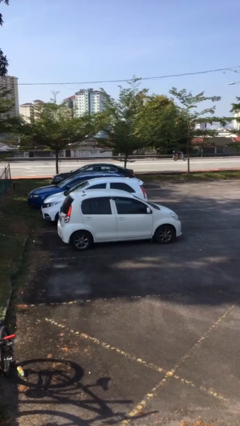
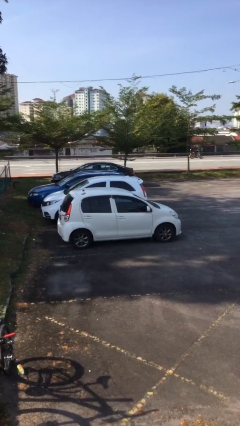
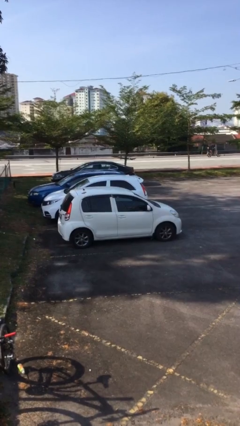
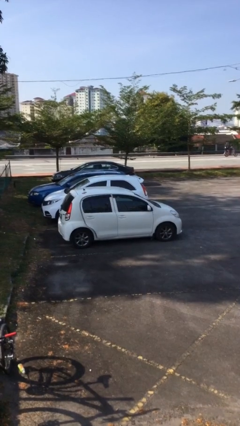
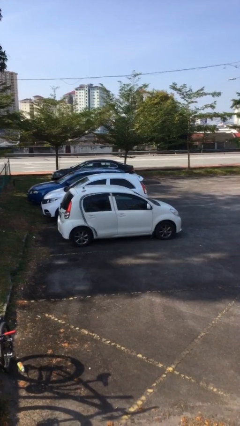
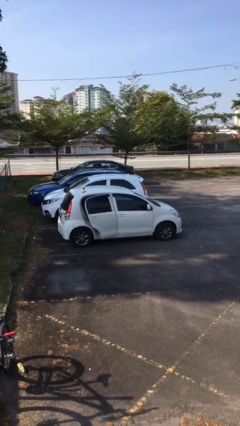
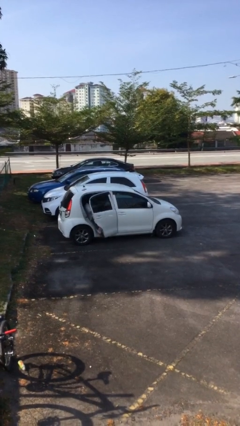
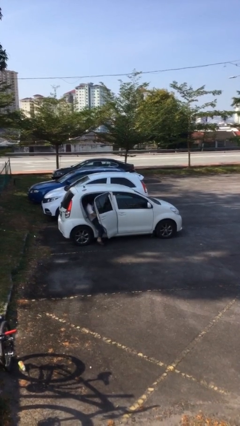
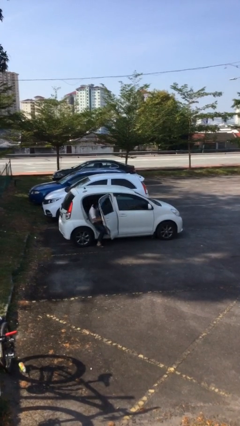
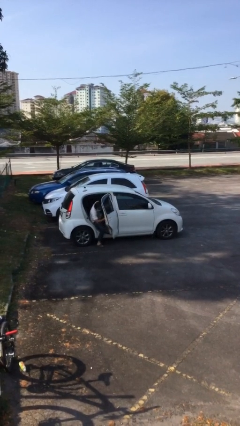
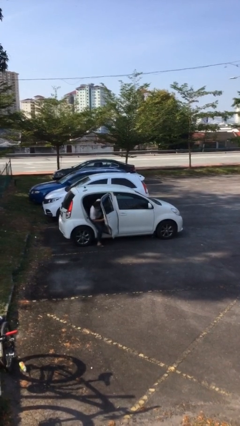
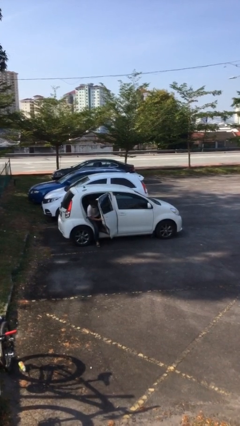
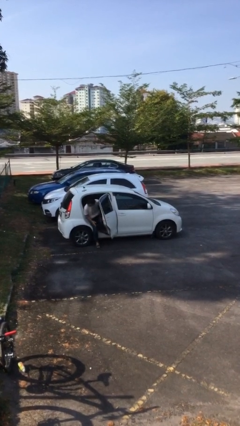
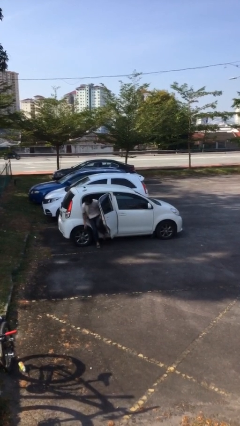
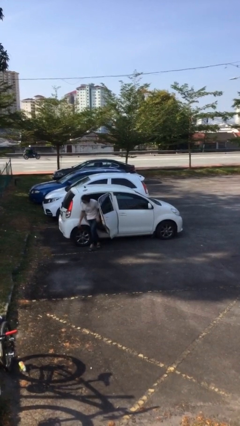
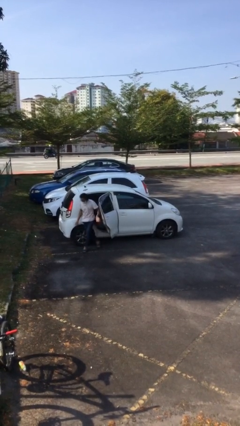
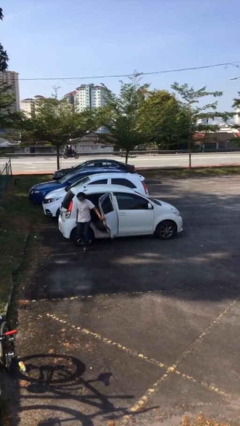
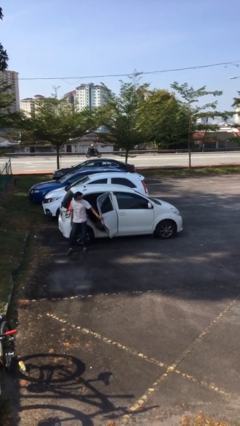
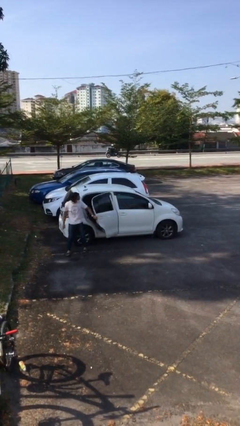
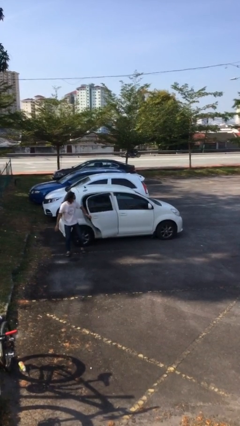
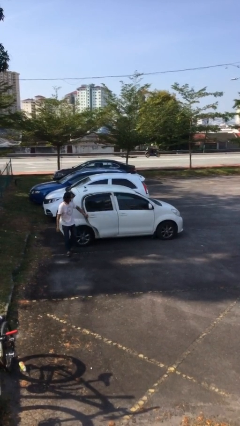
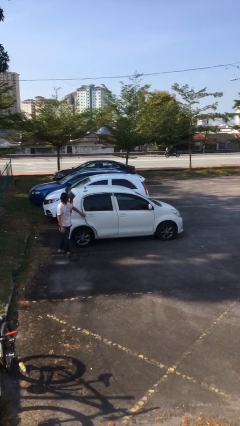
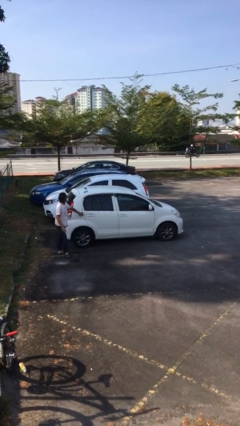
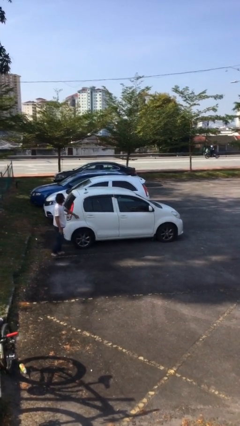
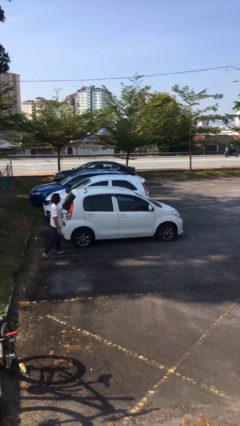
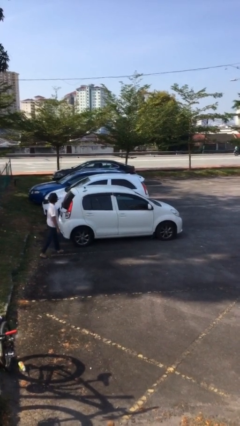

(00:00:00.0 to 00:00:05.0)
car drops off person

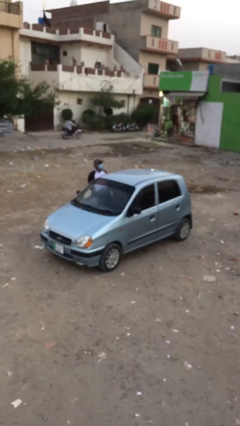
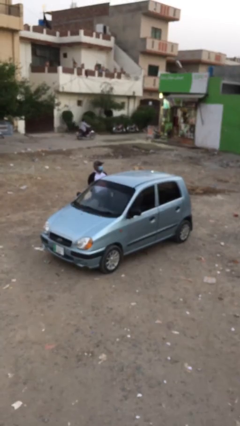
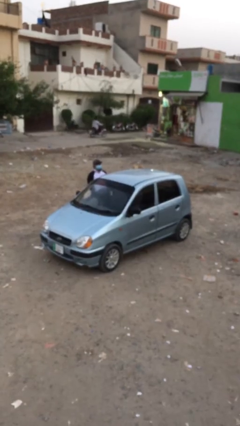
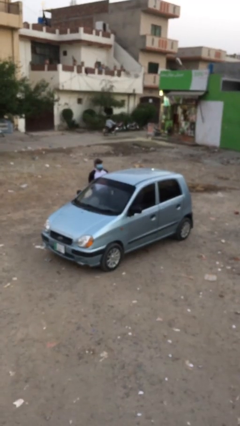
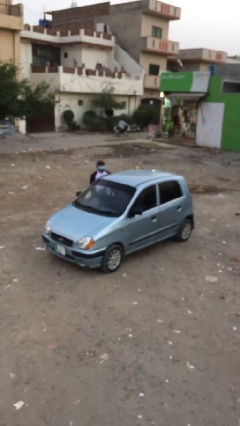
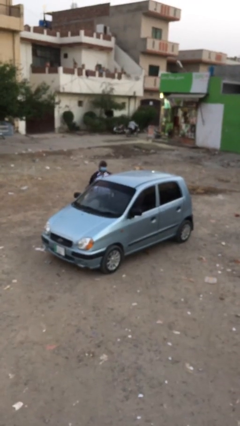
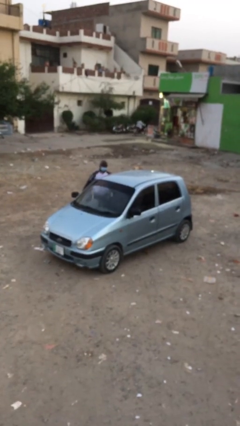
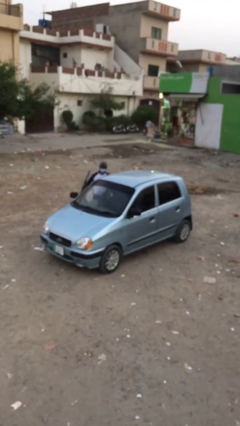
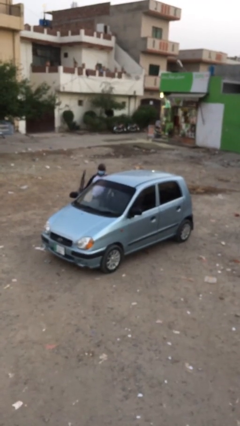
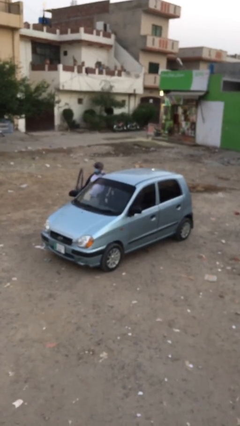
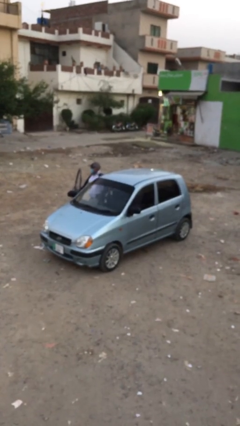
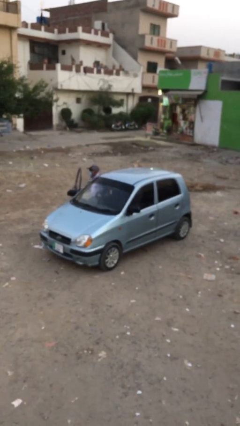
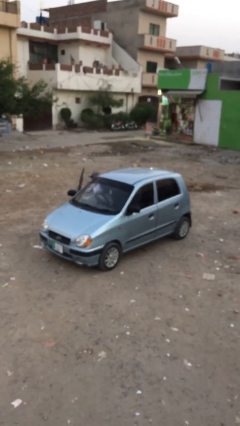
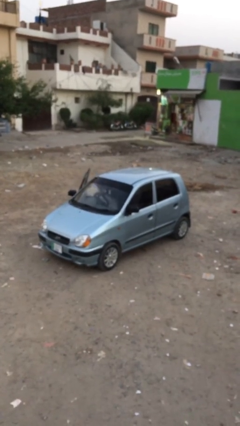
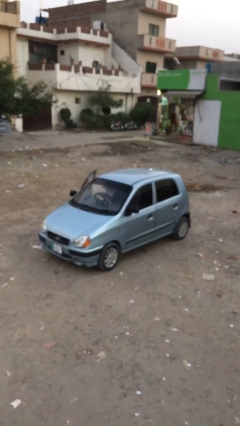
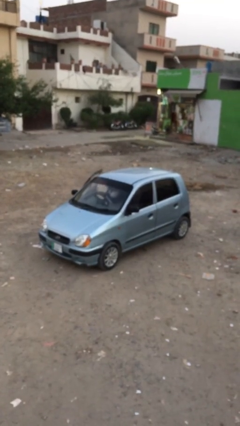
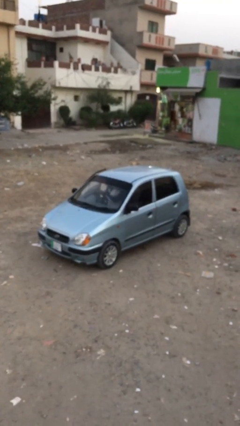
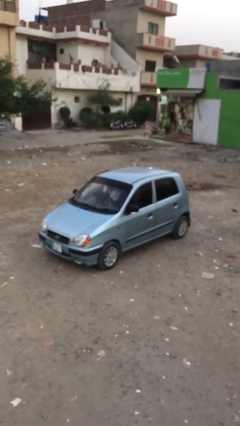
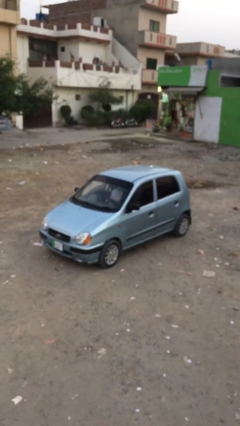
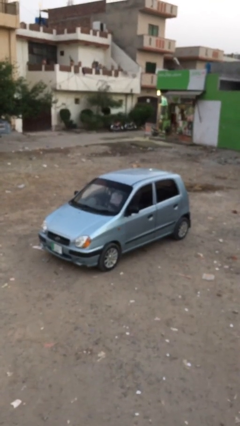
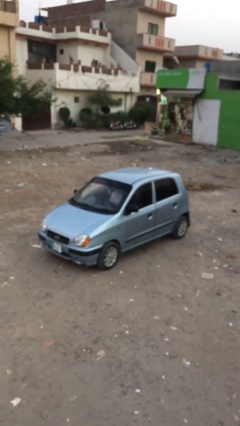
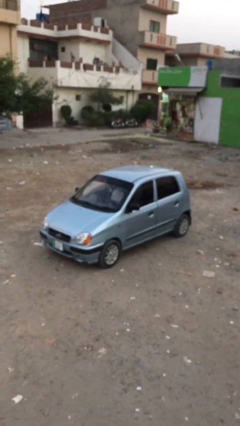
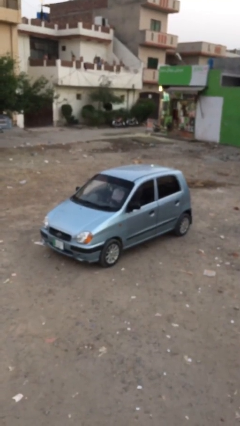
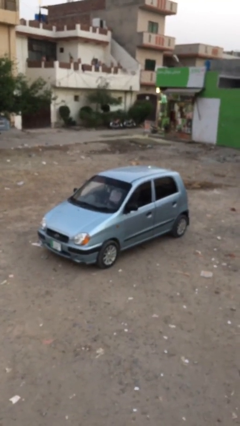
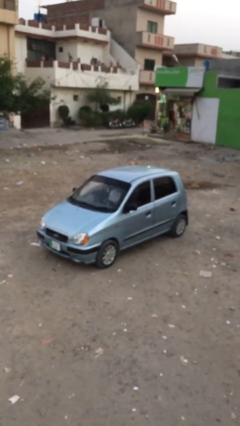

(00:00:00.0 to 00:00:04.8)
car picks up person

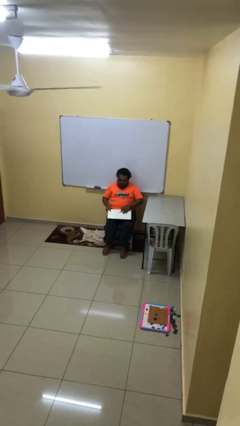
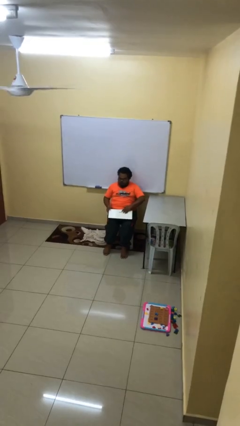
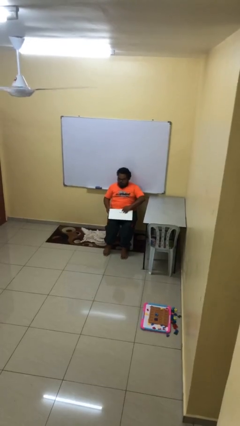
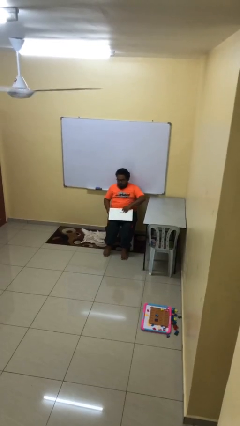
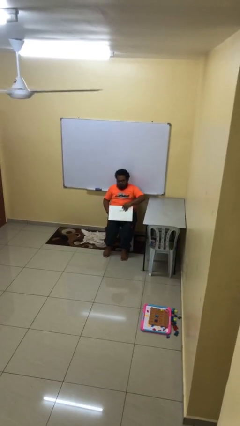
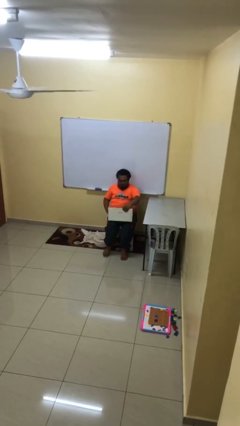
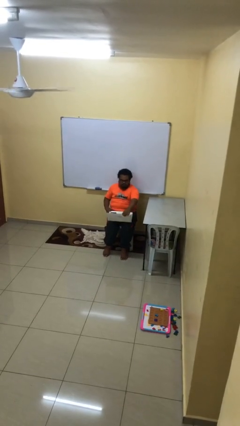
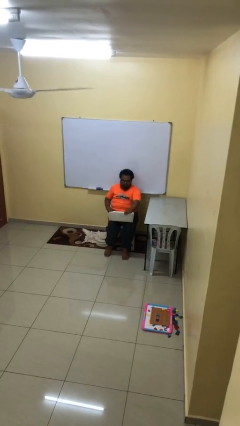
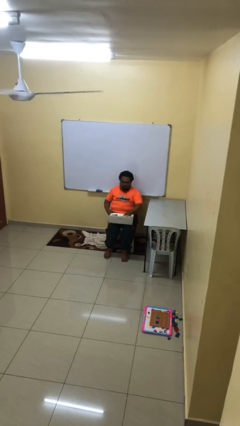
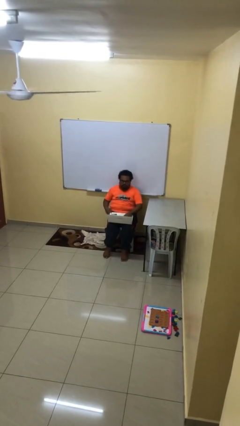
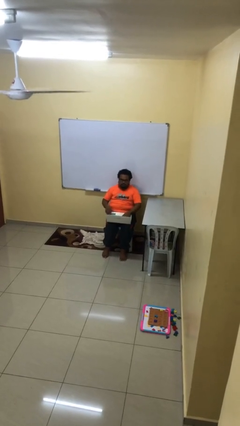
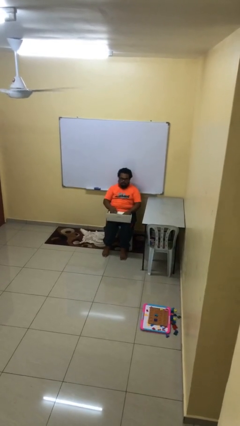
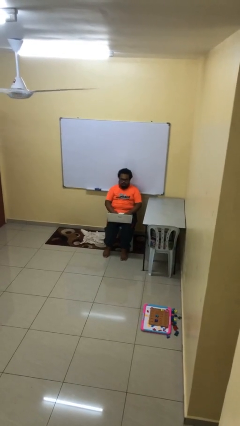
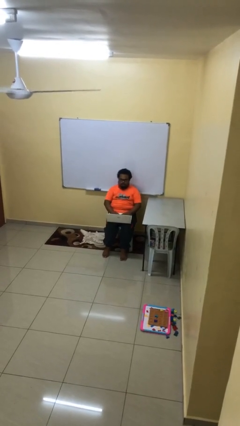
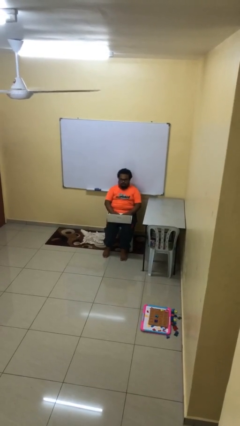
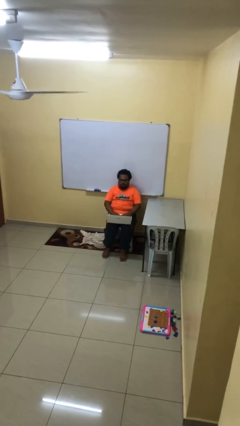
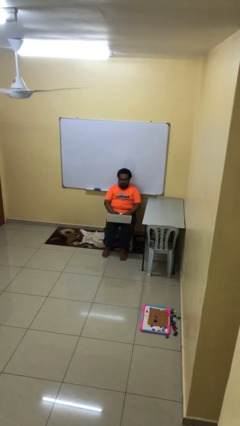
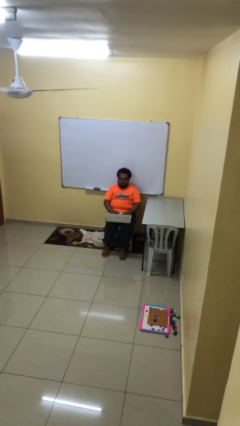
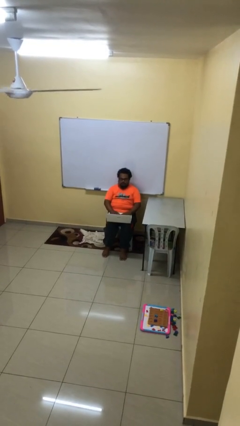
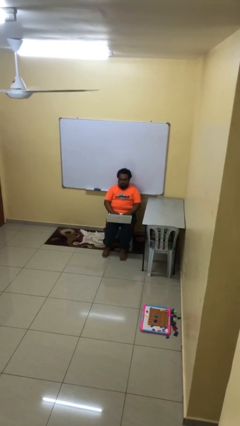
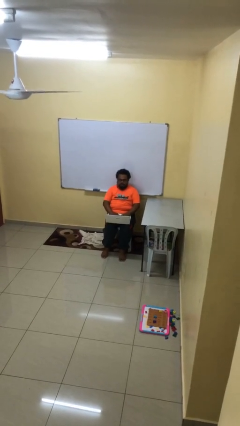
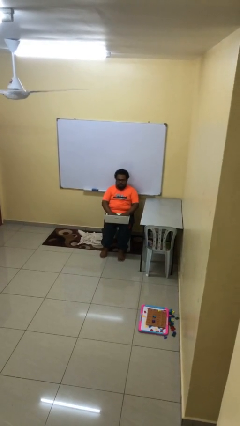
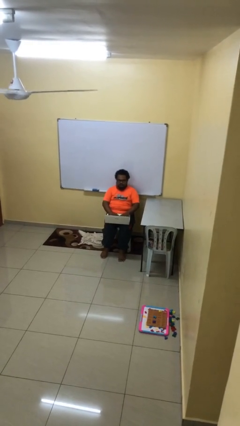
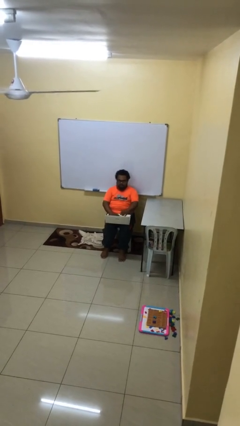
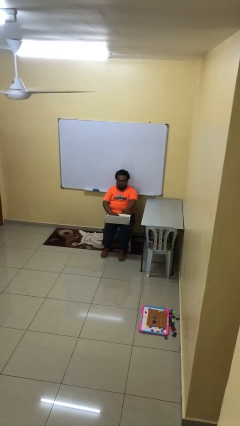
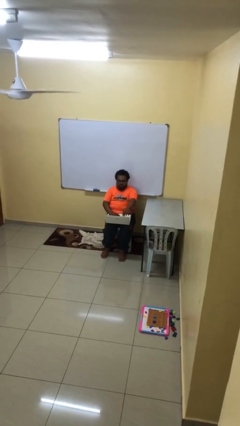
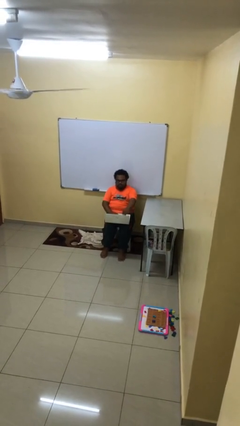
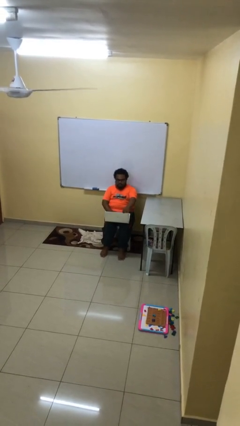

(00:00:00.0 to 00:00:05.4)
person interacts with laptop

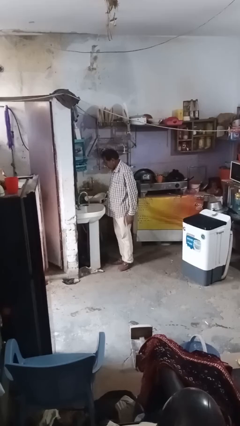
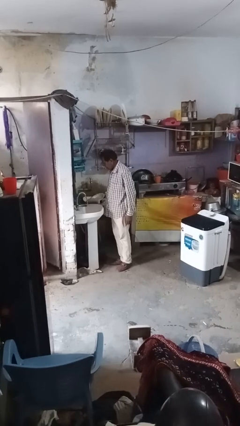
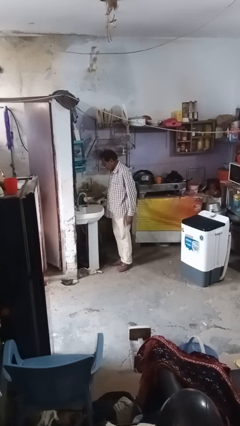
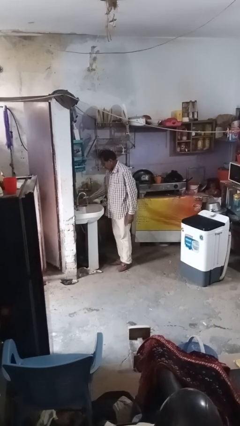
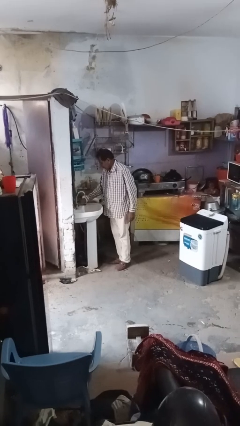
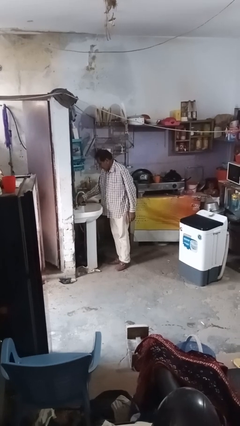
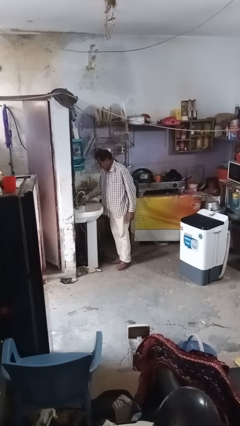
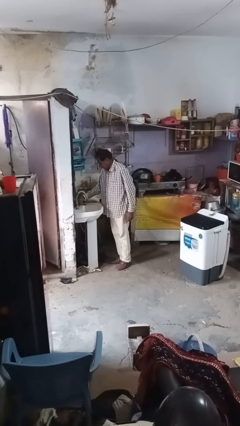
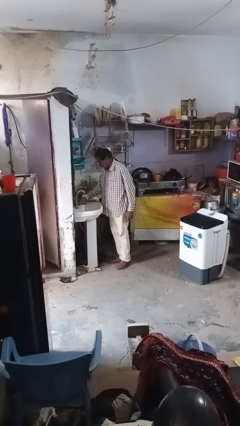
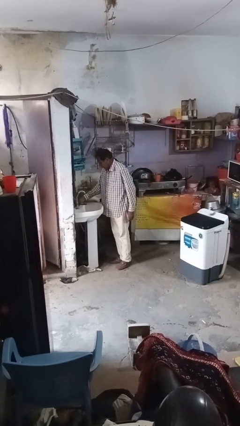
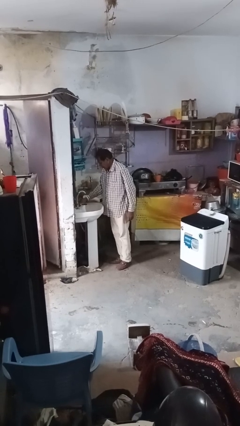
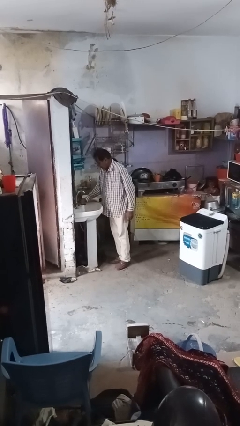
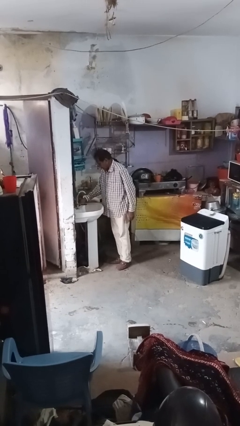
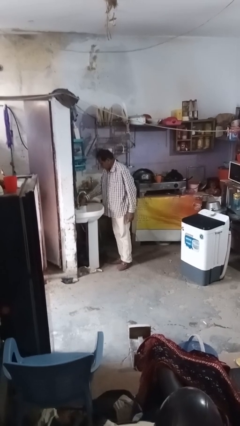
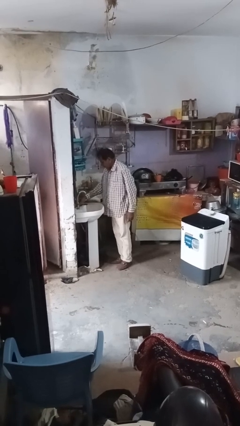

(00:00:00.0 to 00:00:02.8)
person turns off faucet
